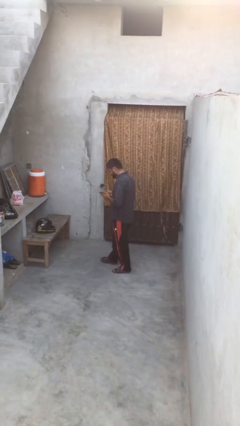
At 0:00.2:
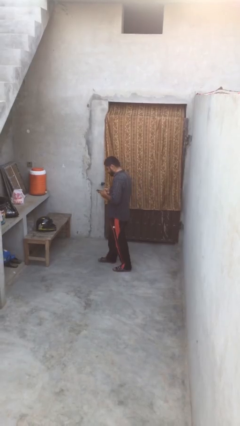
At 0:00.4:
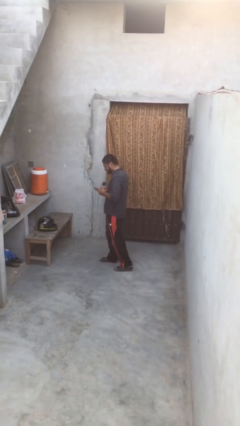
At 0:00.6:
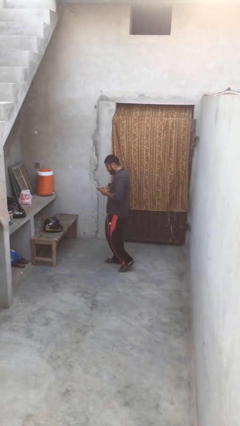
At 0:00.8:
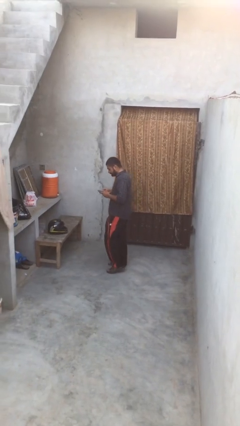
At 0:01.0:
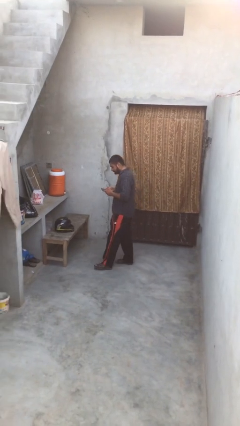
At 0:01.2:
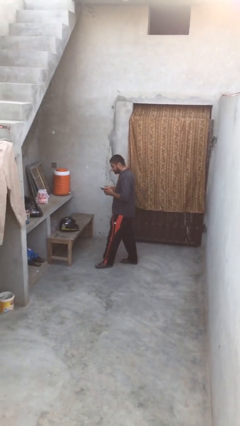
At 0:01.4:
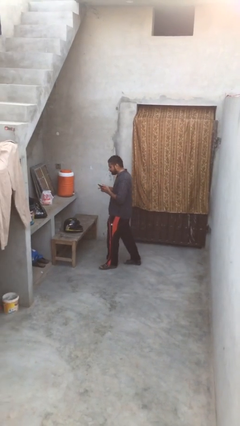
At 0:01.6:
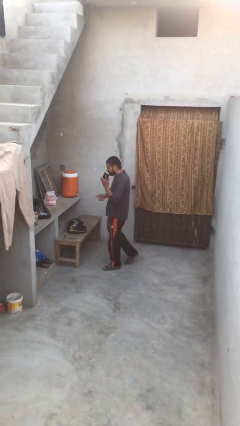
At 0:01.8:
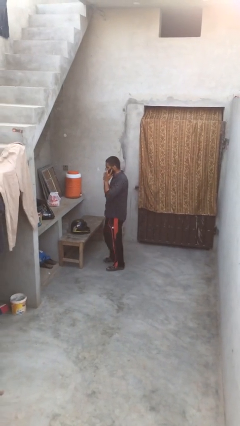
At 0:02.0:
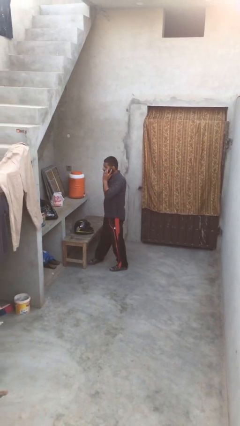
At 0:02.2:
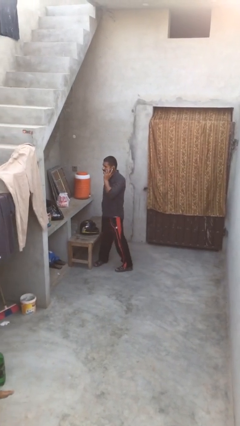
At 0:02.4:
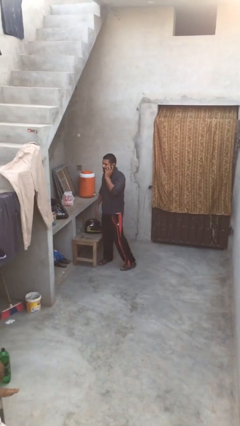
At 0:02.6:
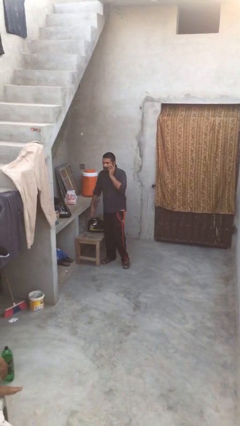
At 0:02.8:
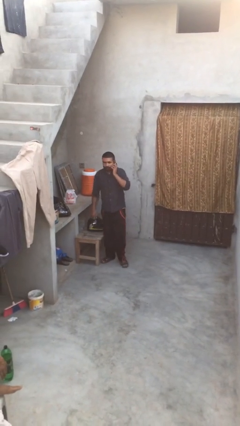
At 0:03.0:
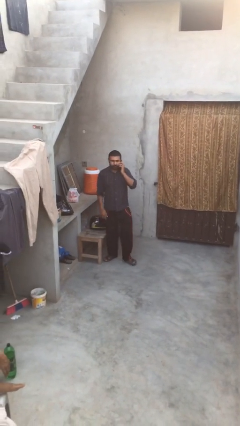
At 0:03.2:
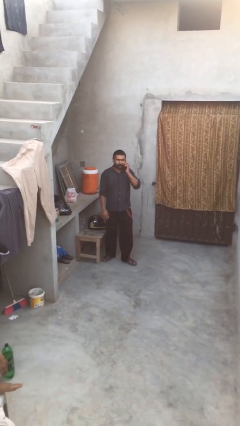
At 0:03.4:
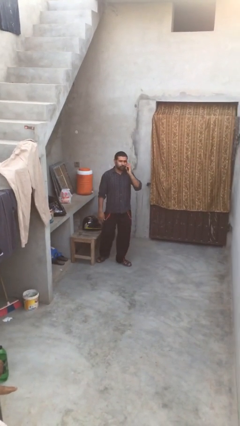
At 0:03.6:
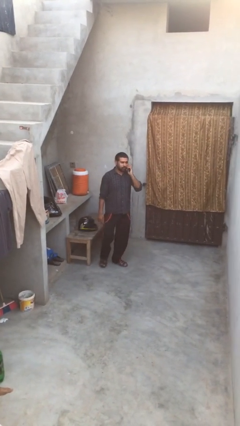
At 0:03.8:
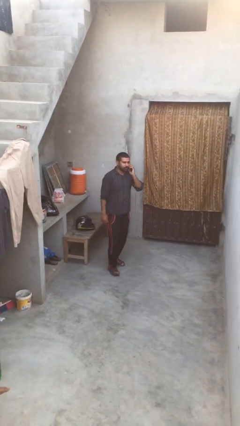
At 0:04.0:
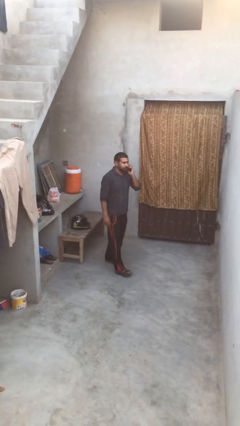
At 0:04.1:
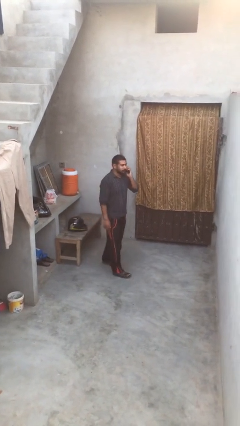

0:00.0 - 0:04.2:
person talks on phone

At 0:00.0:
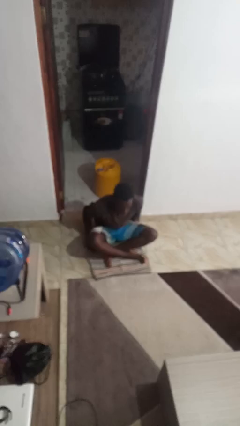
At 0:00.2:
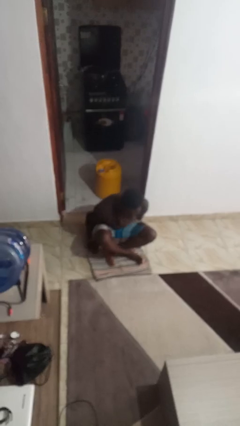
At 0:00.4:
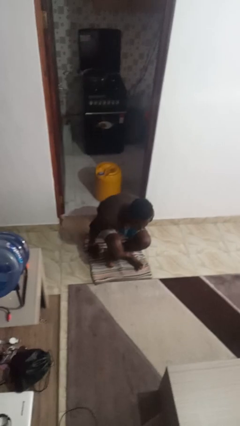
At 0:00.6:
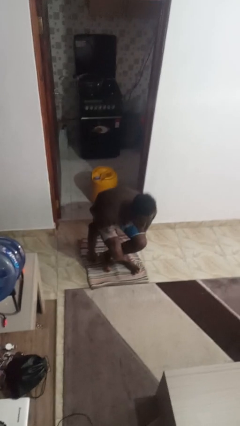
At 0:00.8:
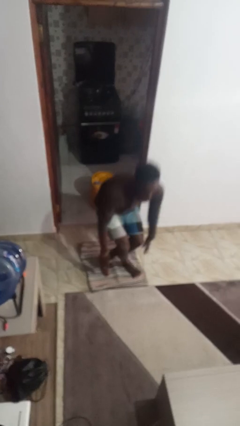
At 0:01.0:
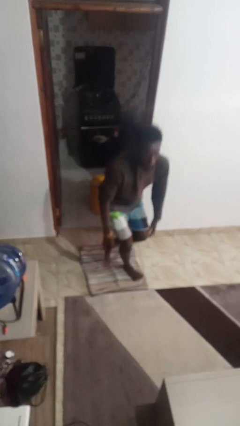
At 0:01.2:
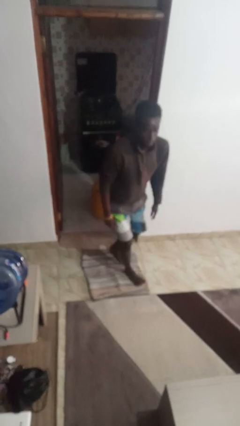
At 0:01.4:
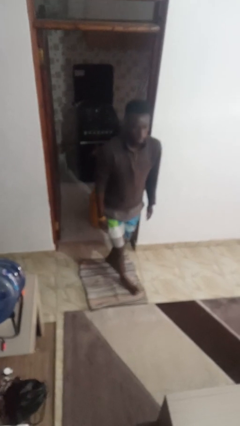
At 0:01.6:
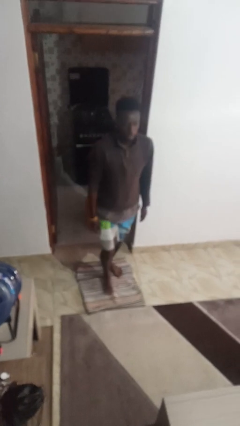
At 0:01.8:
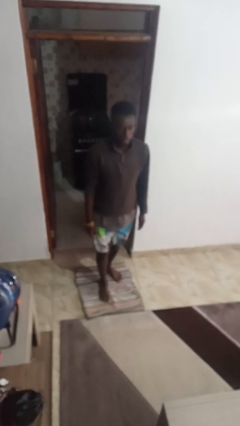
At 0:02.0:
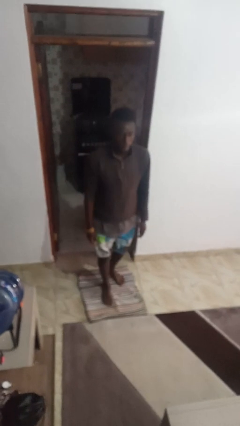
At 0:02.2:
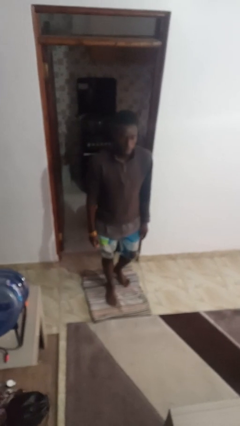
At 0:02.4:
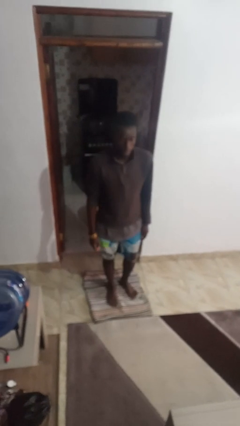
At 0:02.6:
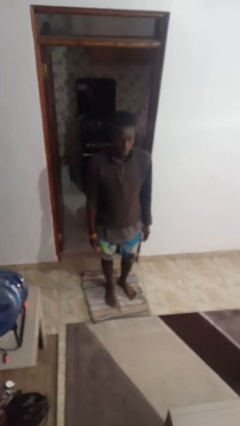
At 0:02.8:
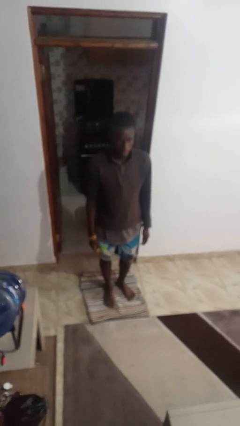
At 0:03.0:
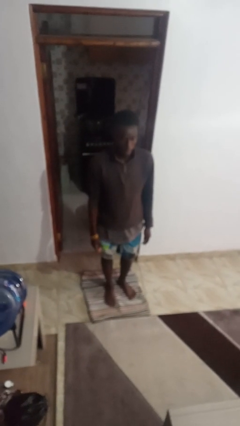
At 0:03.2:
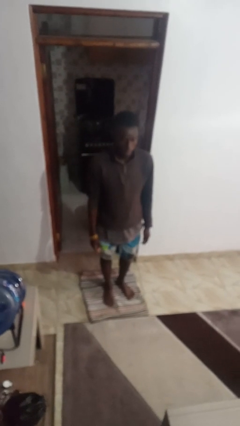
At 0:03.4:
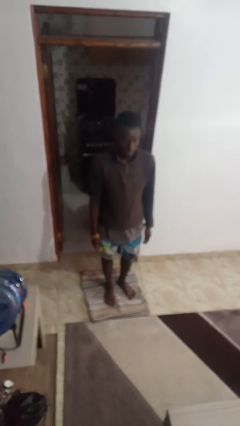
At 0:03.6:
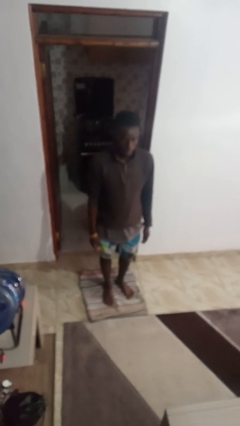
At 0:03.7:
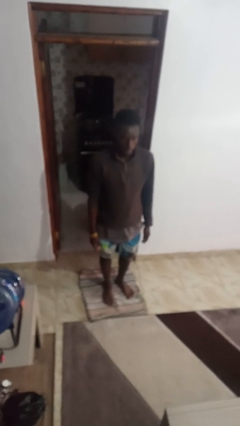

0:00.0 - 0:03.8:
person stands up from floor

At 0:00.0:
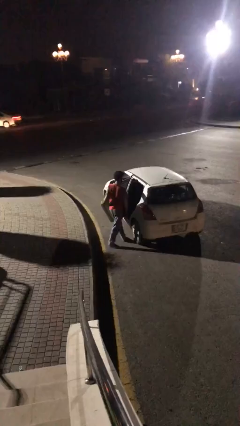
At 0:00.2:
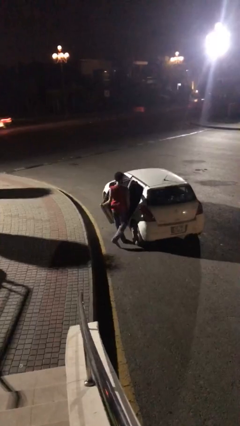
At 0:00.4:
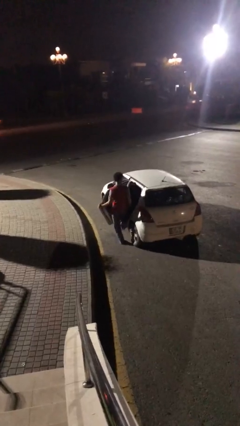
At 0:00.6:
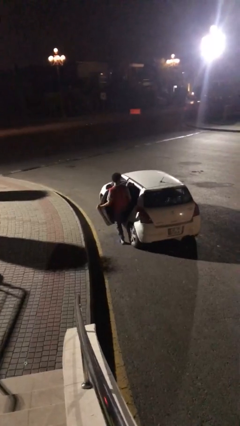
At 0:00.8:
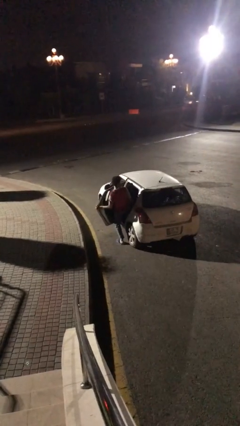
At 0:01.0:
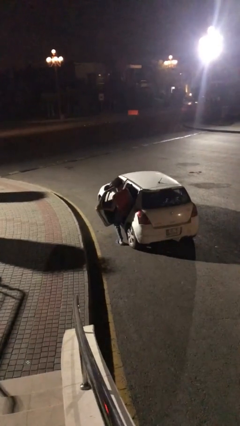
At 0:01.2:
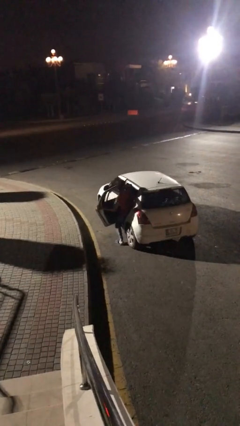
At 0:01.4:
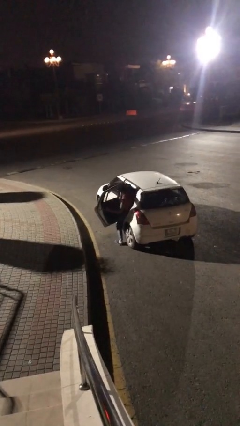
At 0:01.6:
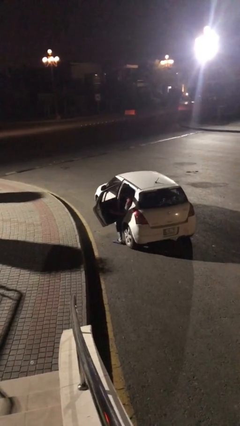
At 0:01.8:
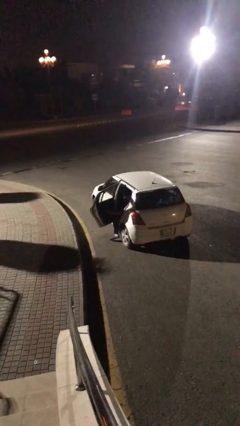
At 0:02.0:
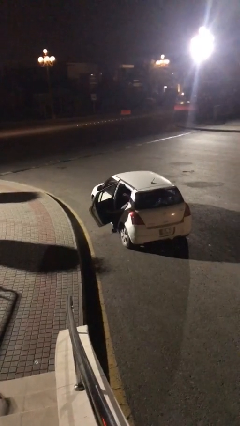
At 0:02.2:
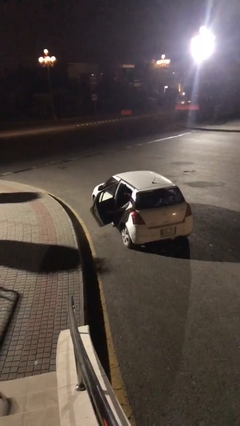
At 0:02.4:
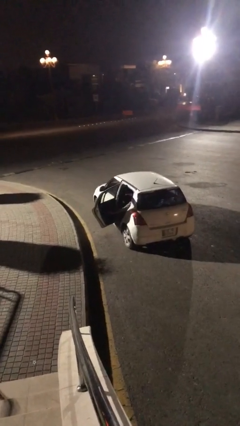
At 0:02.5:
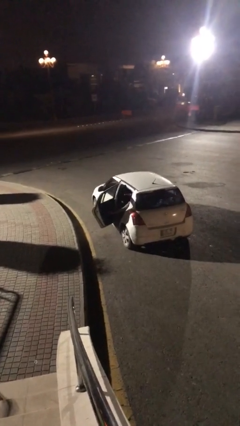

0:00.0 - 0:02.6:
person enters car

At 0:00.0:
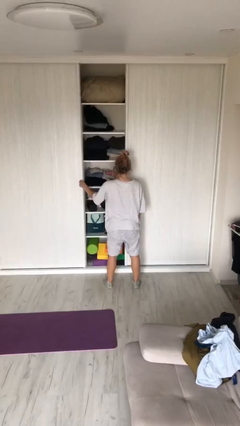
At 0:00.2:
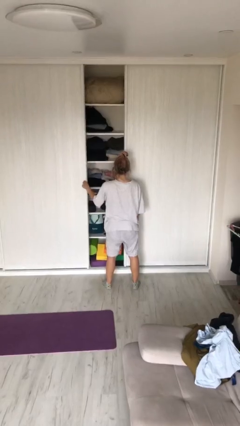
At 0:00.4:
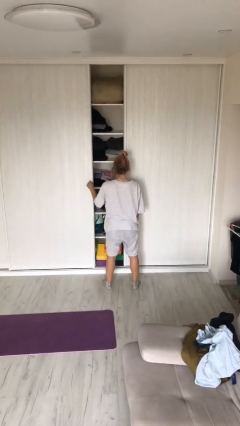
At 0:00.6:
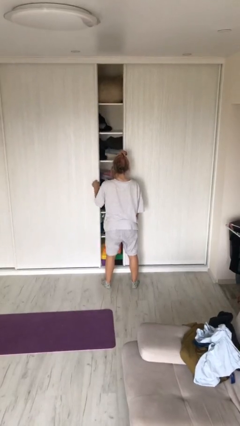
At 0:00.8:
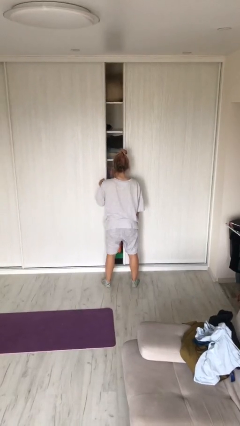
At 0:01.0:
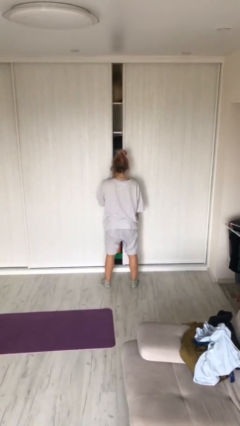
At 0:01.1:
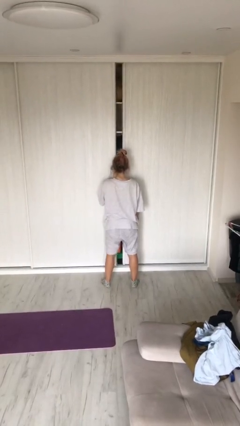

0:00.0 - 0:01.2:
person closes sliding door

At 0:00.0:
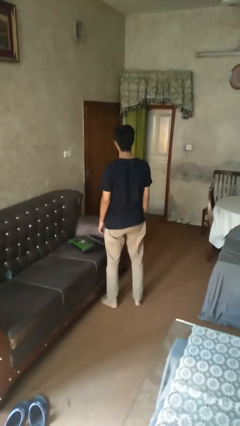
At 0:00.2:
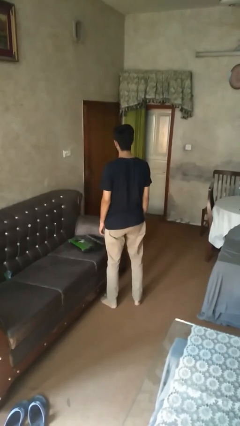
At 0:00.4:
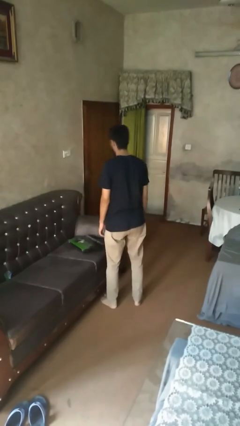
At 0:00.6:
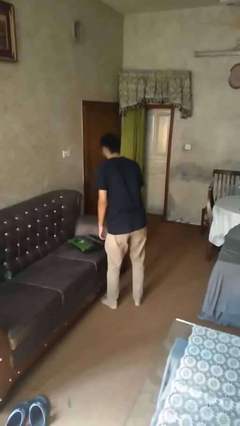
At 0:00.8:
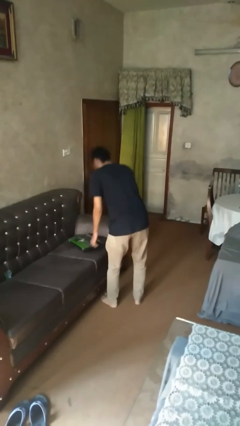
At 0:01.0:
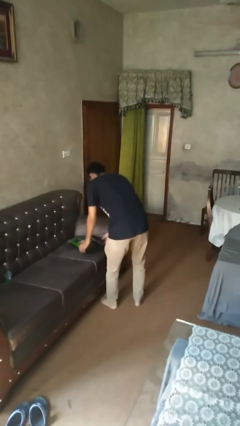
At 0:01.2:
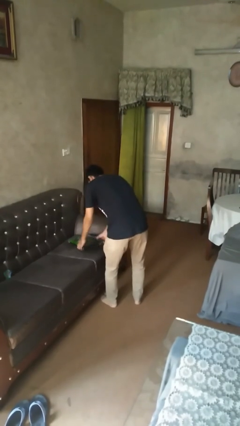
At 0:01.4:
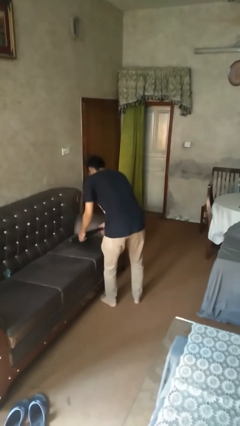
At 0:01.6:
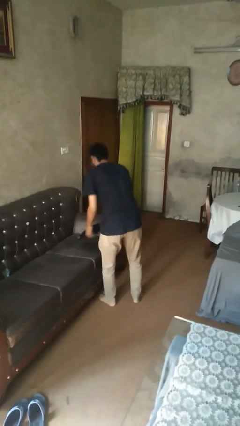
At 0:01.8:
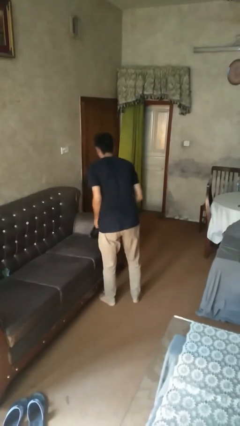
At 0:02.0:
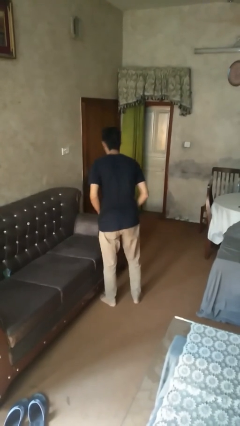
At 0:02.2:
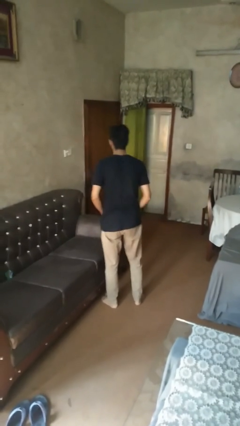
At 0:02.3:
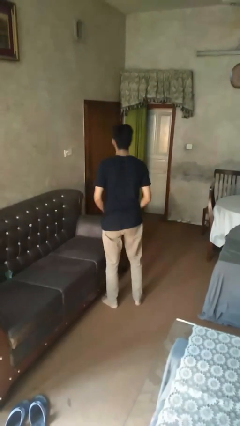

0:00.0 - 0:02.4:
person picks up object from couch

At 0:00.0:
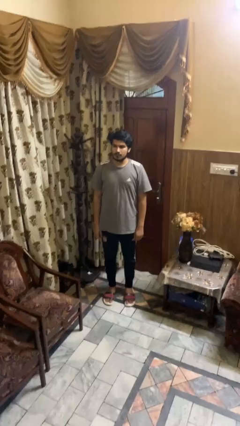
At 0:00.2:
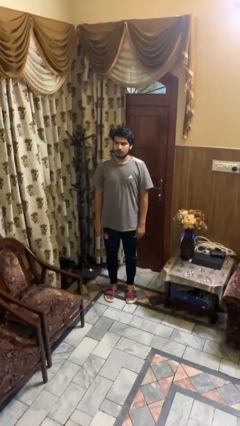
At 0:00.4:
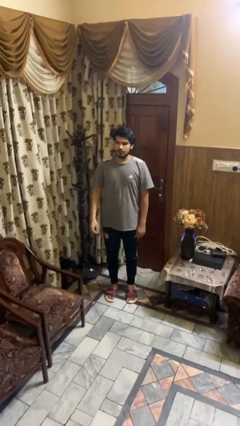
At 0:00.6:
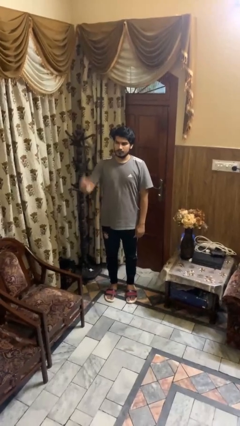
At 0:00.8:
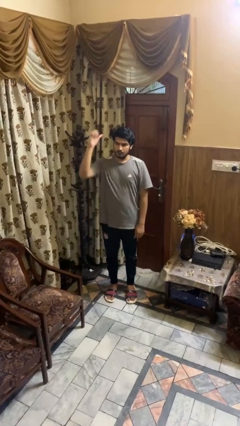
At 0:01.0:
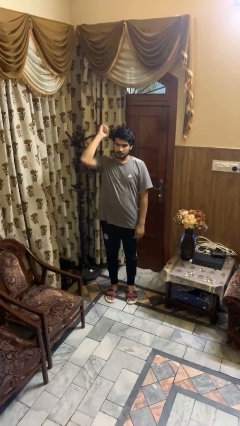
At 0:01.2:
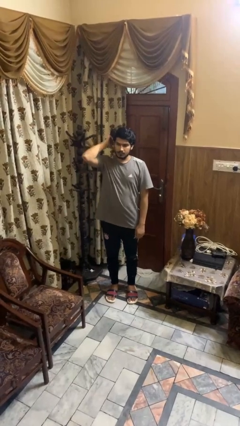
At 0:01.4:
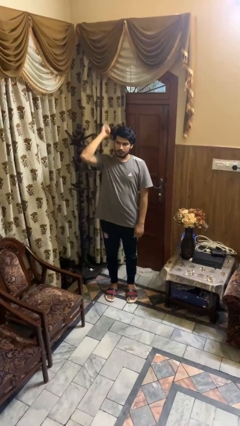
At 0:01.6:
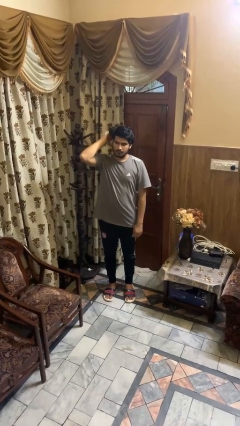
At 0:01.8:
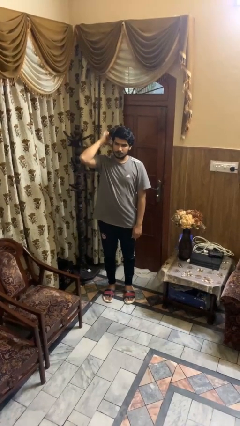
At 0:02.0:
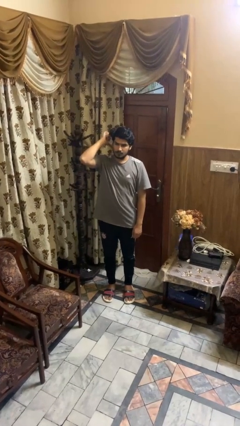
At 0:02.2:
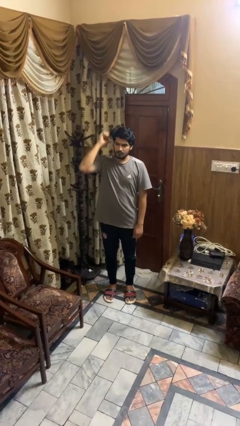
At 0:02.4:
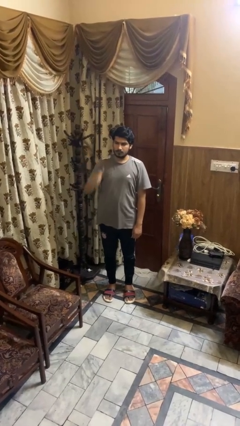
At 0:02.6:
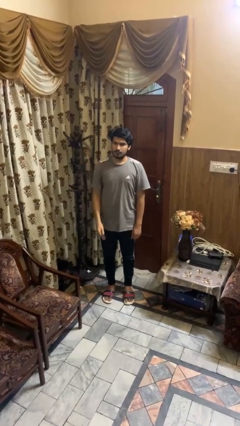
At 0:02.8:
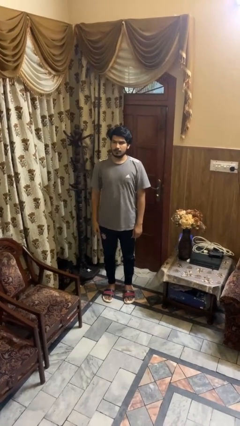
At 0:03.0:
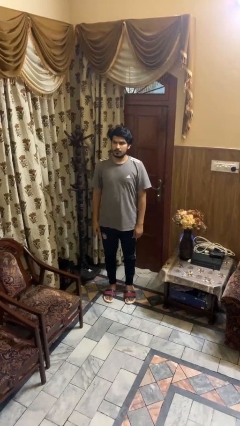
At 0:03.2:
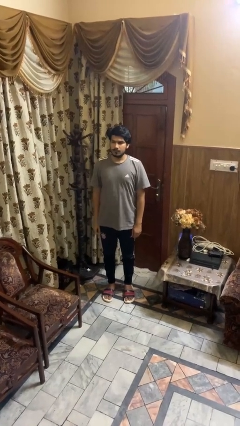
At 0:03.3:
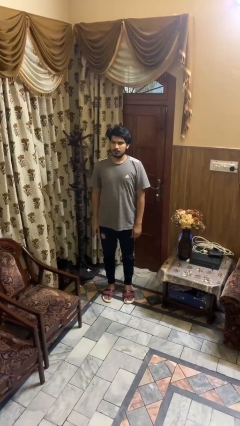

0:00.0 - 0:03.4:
person gestures behind me
